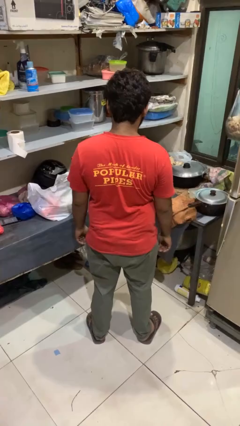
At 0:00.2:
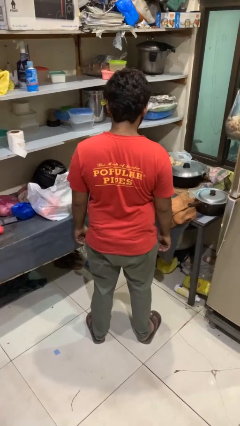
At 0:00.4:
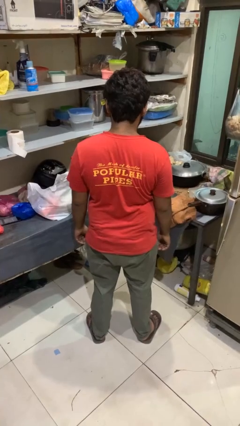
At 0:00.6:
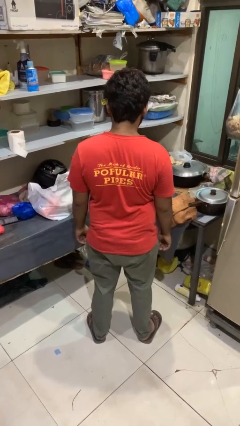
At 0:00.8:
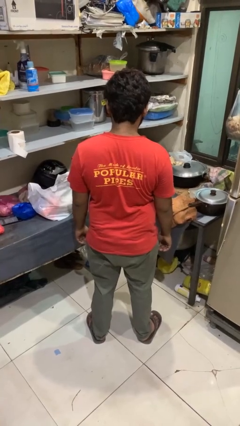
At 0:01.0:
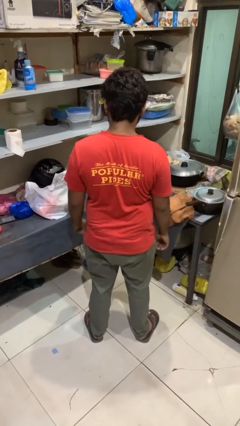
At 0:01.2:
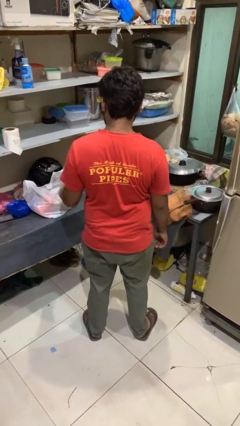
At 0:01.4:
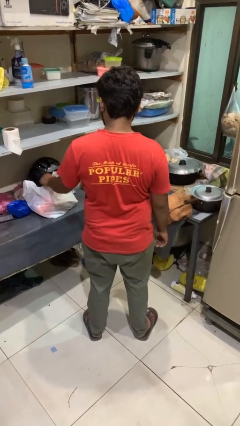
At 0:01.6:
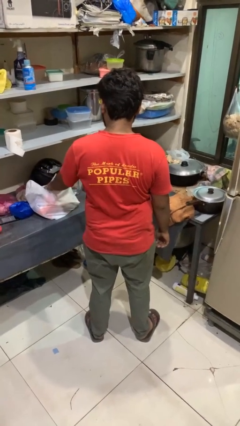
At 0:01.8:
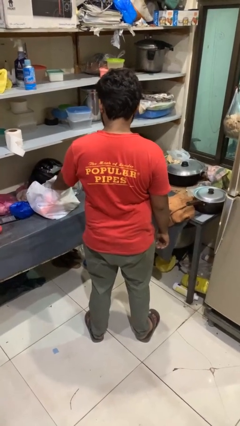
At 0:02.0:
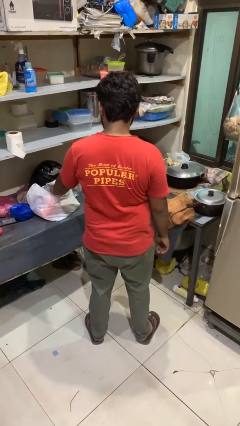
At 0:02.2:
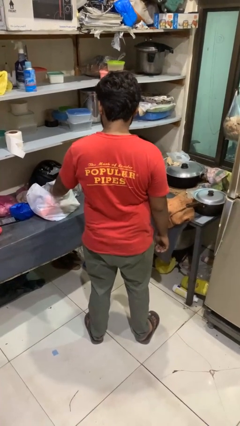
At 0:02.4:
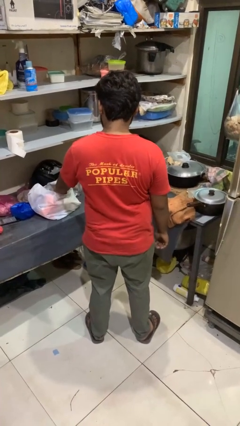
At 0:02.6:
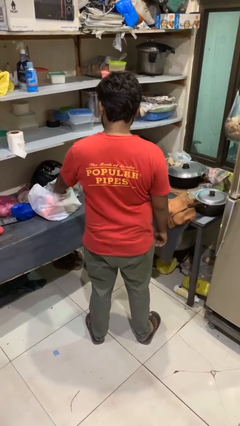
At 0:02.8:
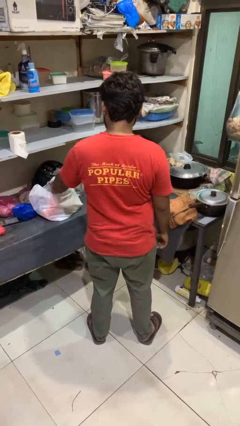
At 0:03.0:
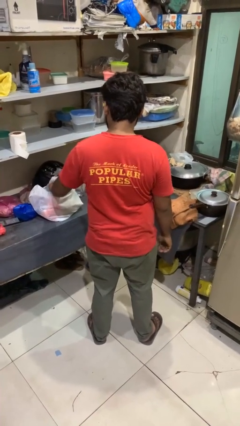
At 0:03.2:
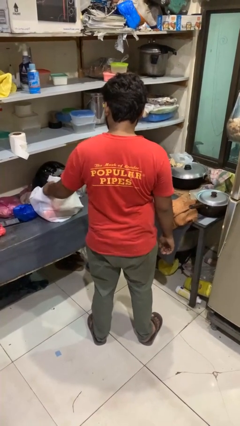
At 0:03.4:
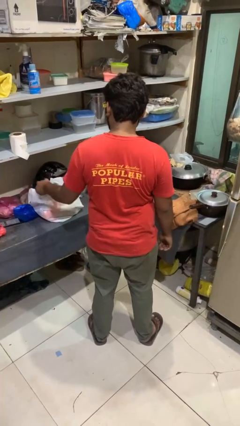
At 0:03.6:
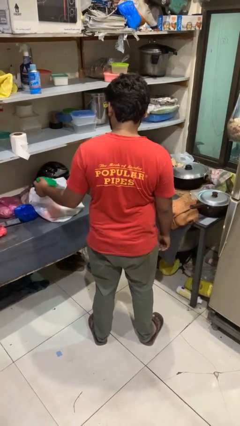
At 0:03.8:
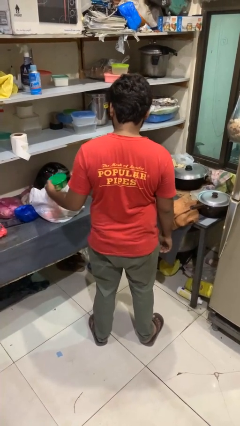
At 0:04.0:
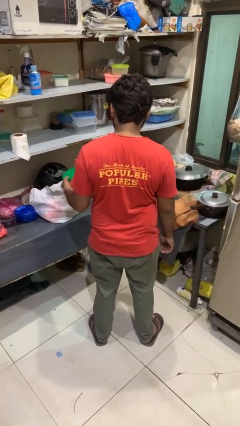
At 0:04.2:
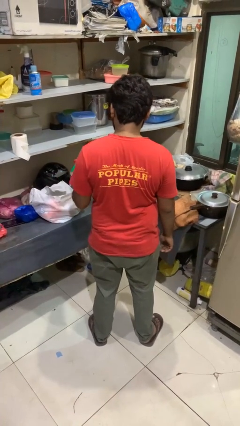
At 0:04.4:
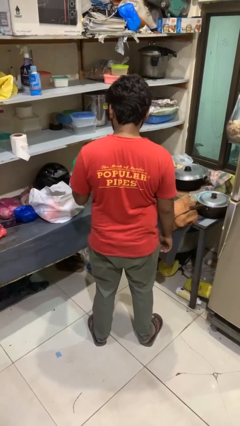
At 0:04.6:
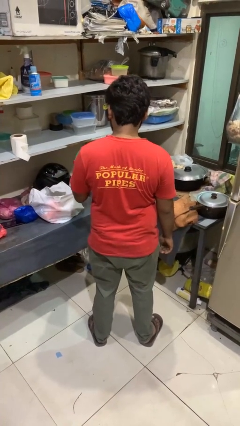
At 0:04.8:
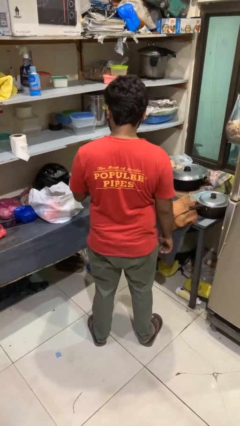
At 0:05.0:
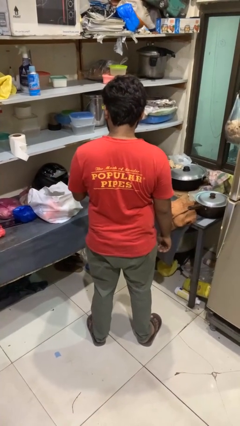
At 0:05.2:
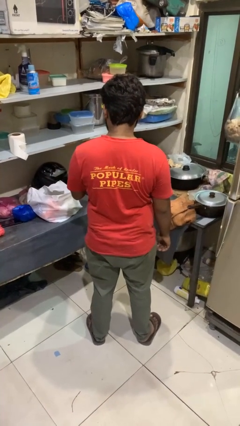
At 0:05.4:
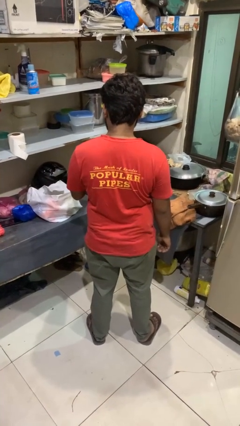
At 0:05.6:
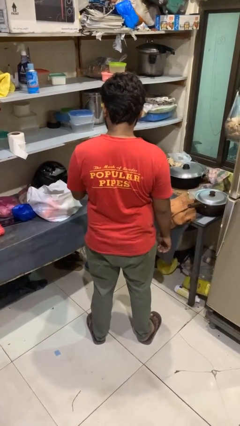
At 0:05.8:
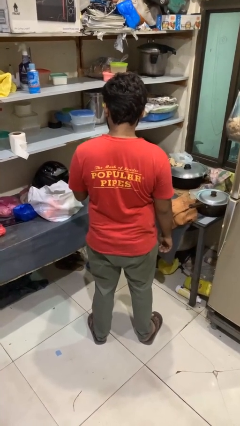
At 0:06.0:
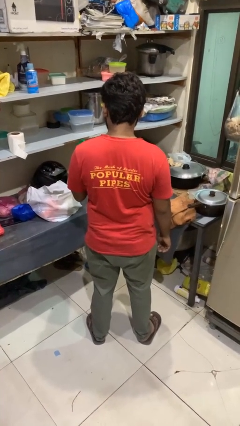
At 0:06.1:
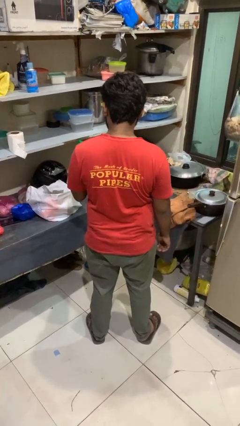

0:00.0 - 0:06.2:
person takes object from bag

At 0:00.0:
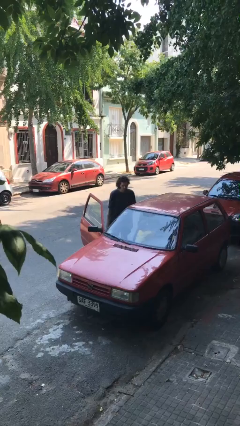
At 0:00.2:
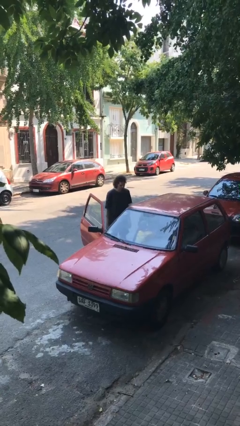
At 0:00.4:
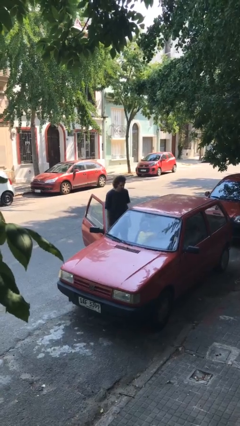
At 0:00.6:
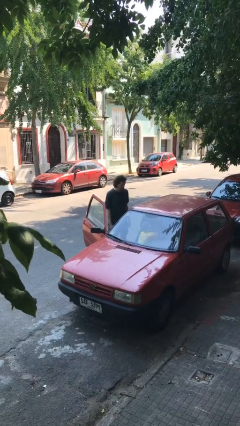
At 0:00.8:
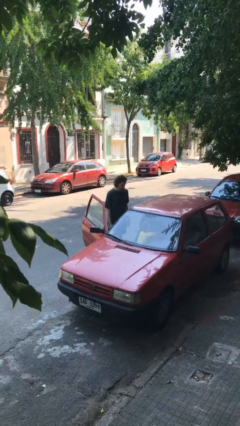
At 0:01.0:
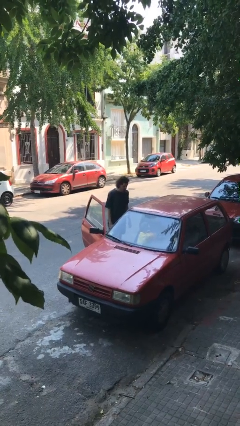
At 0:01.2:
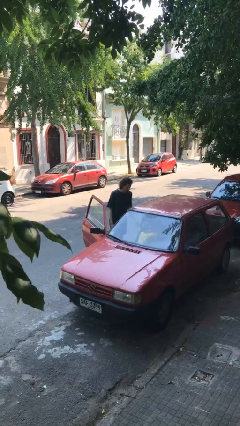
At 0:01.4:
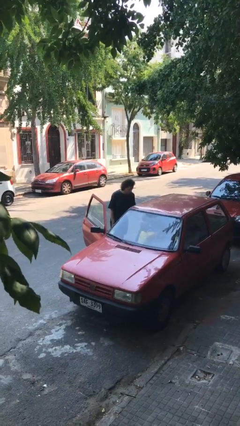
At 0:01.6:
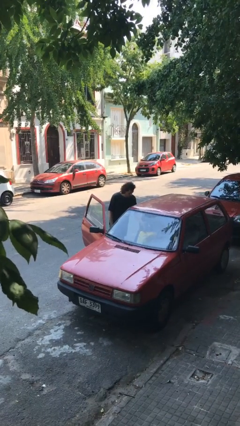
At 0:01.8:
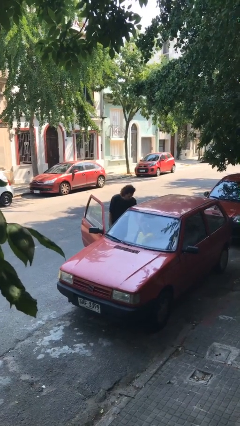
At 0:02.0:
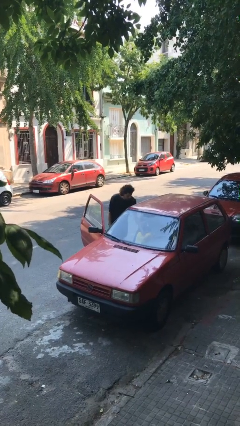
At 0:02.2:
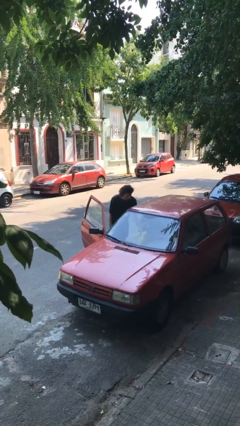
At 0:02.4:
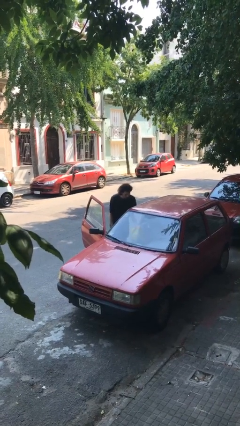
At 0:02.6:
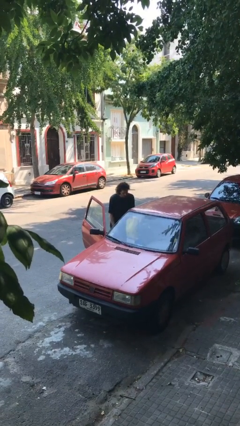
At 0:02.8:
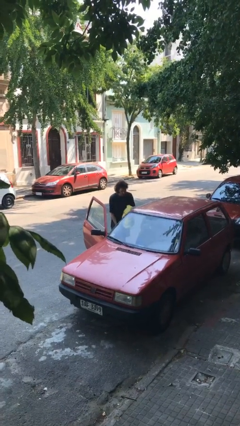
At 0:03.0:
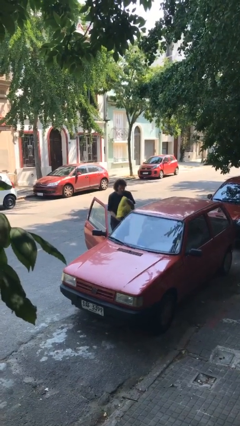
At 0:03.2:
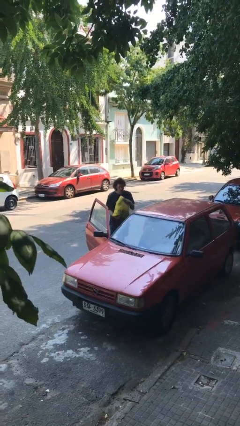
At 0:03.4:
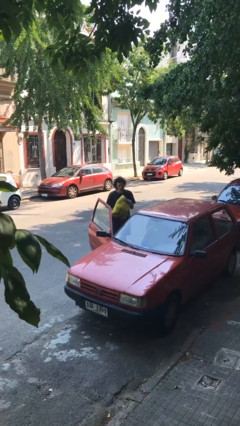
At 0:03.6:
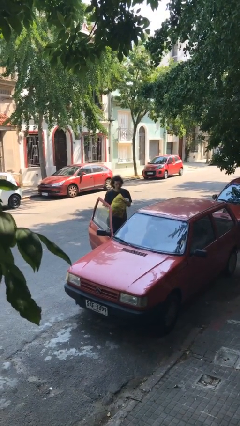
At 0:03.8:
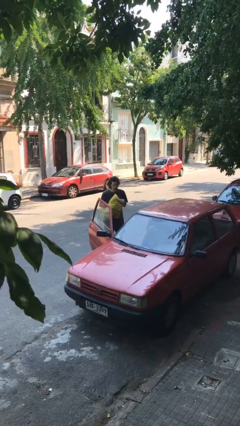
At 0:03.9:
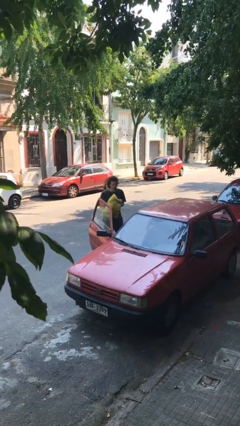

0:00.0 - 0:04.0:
person unloads car

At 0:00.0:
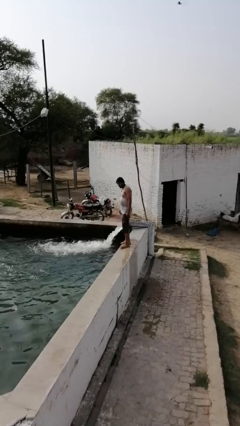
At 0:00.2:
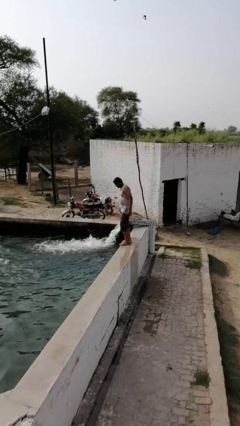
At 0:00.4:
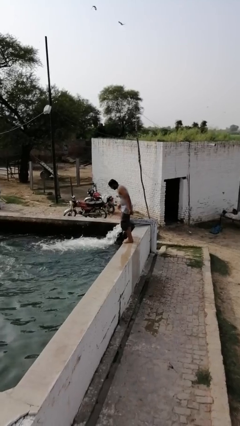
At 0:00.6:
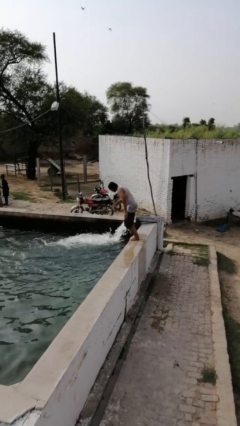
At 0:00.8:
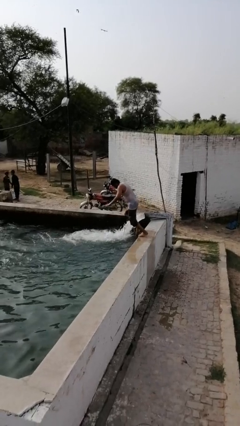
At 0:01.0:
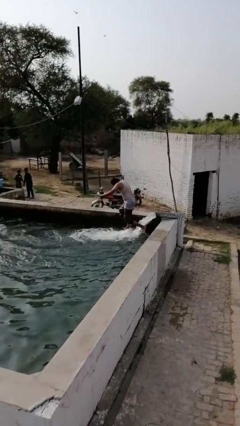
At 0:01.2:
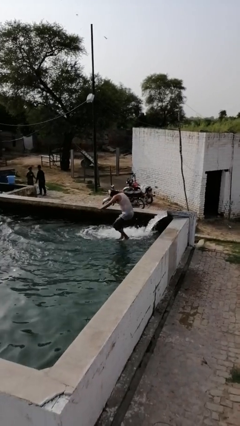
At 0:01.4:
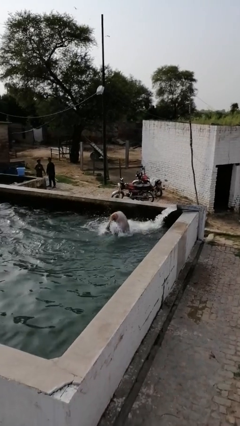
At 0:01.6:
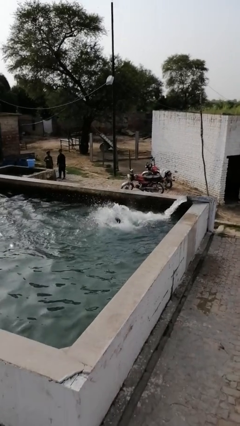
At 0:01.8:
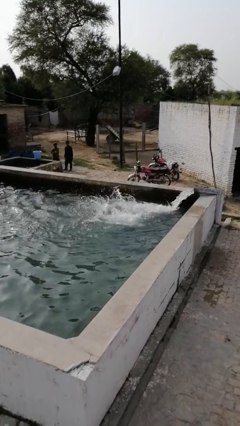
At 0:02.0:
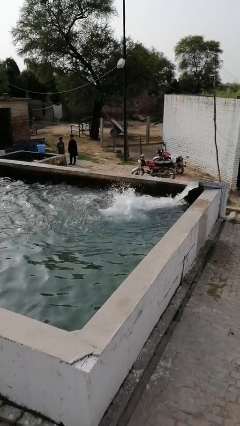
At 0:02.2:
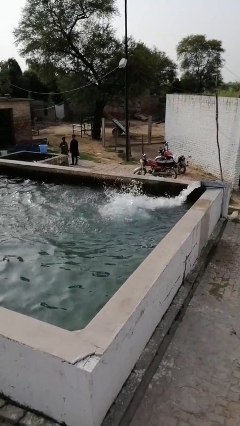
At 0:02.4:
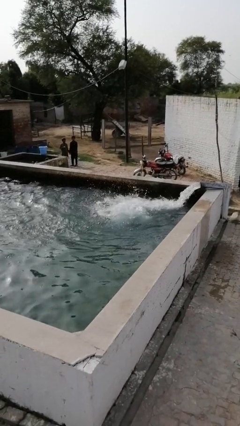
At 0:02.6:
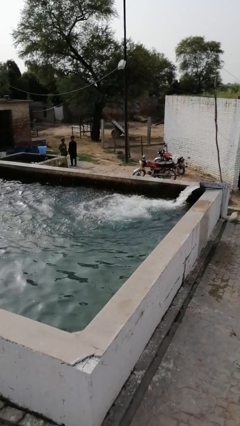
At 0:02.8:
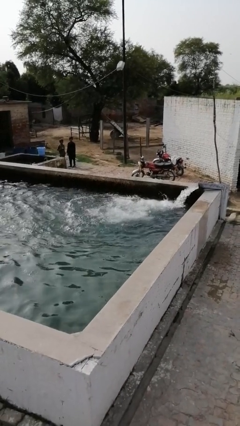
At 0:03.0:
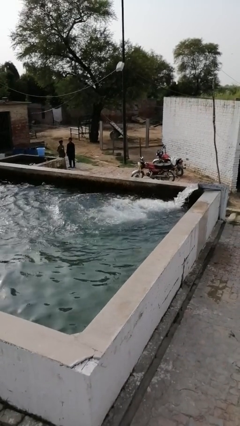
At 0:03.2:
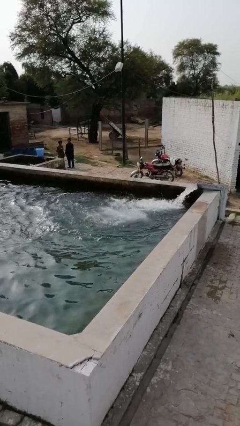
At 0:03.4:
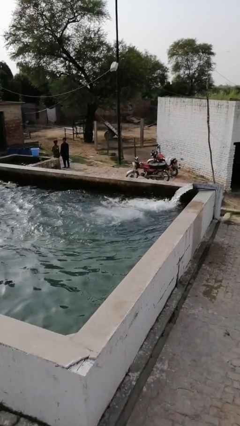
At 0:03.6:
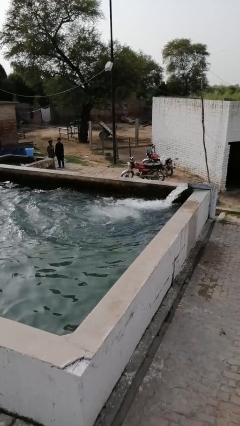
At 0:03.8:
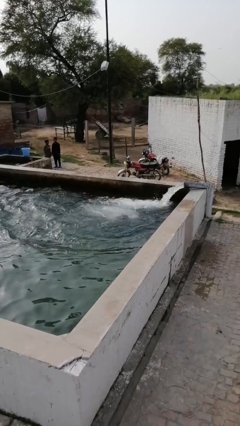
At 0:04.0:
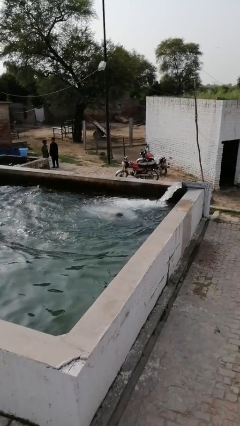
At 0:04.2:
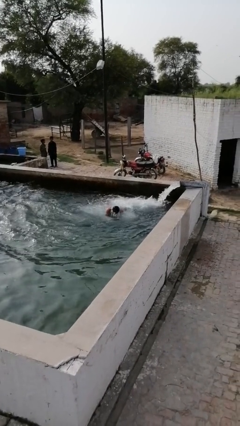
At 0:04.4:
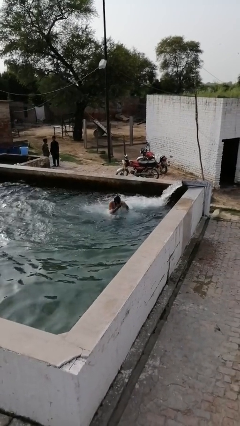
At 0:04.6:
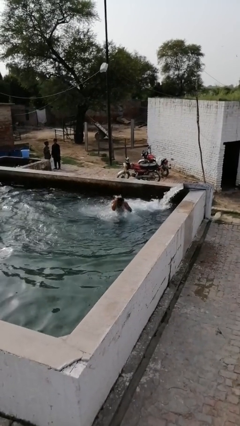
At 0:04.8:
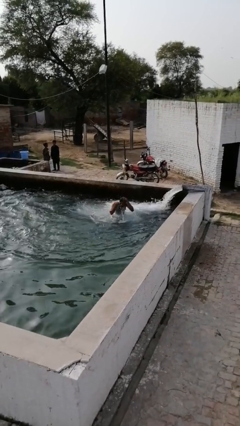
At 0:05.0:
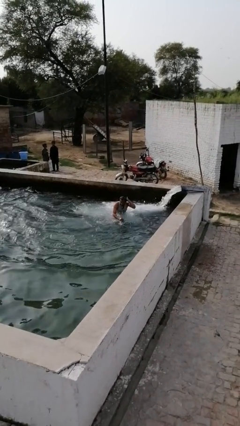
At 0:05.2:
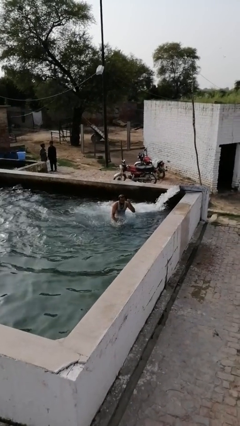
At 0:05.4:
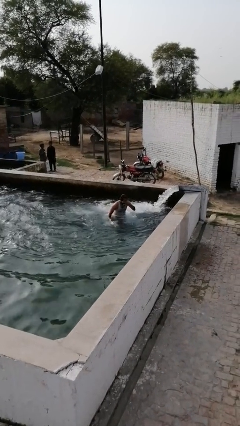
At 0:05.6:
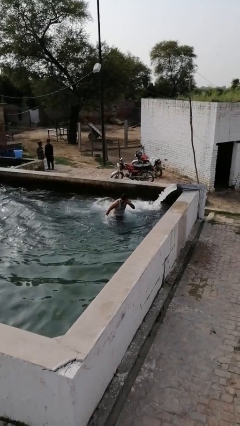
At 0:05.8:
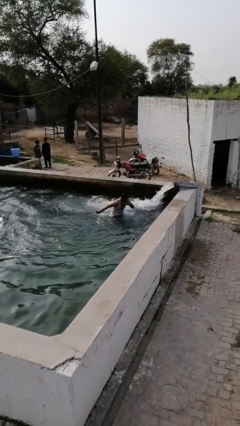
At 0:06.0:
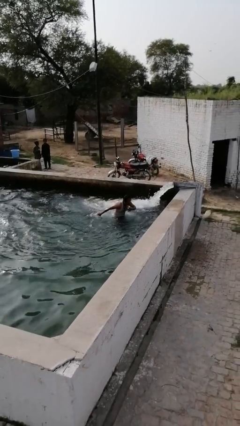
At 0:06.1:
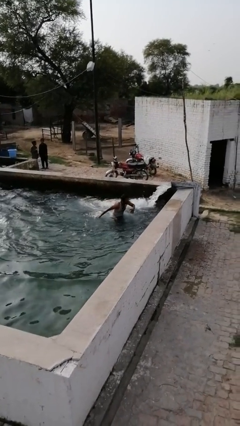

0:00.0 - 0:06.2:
person jumps into pool

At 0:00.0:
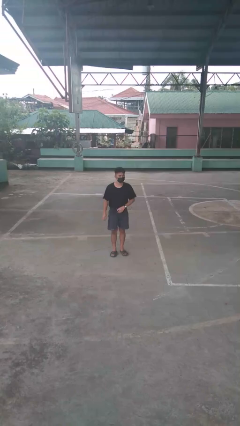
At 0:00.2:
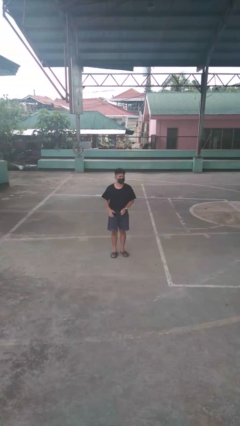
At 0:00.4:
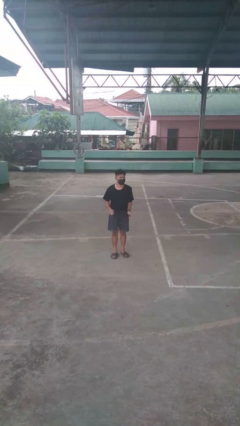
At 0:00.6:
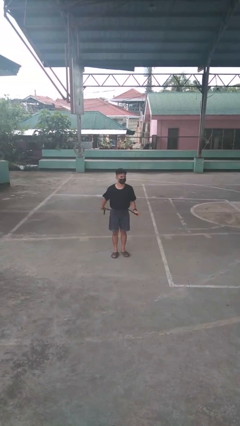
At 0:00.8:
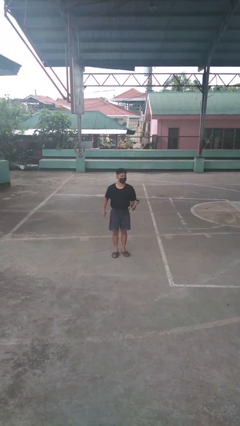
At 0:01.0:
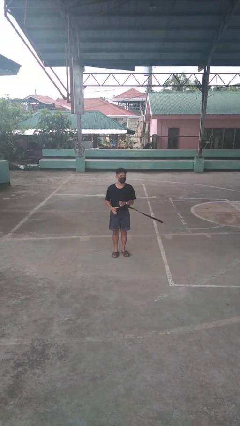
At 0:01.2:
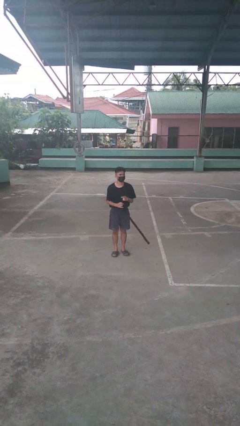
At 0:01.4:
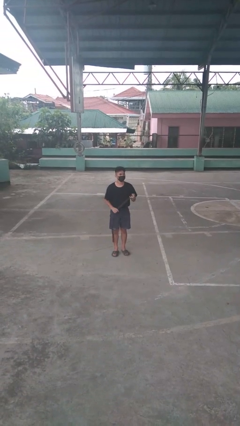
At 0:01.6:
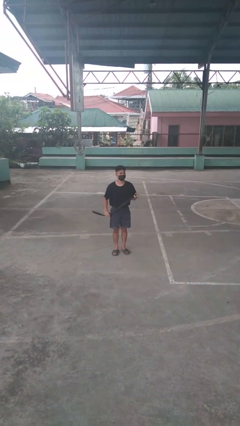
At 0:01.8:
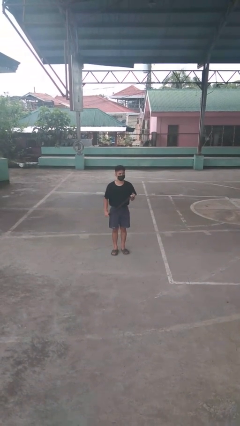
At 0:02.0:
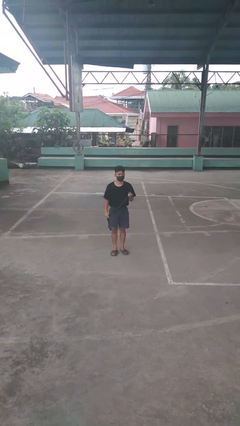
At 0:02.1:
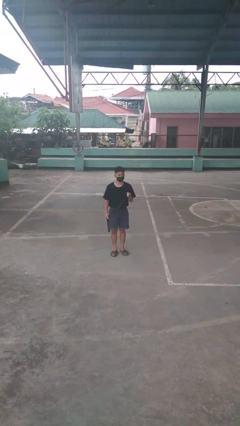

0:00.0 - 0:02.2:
person takes off belt
